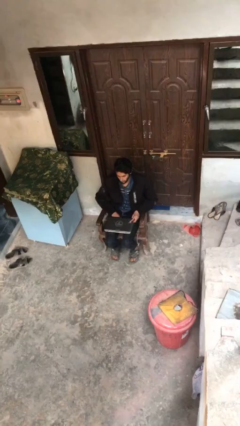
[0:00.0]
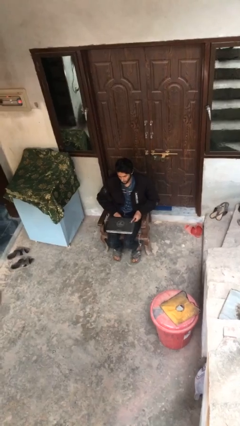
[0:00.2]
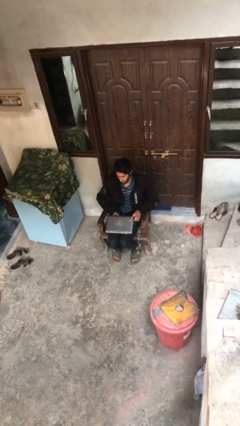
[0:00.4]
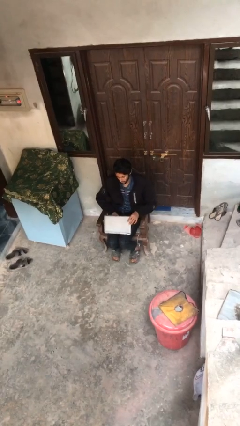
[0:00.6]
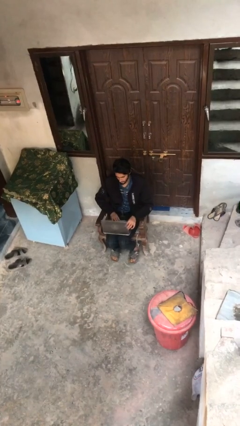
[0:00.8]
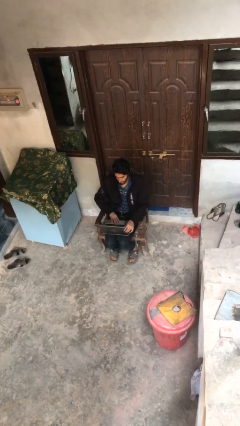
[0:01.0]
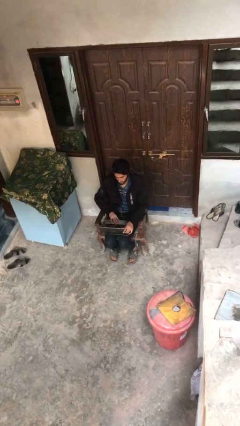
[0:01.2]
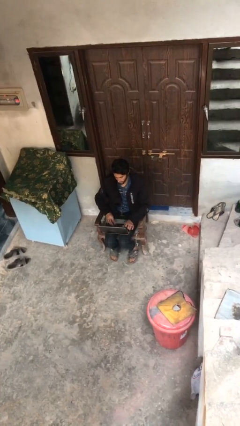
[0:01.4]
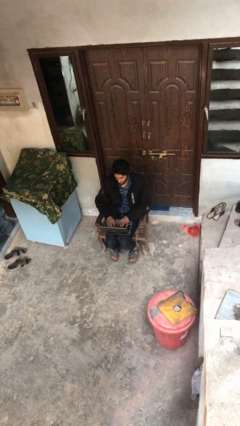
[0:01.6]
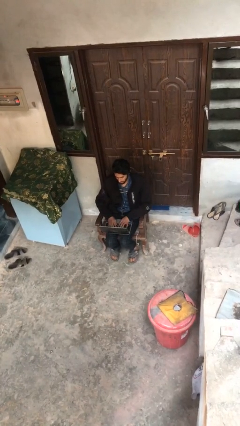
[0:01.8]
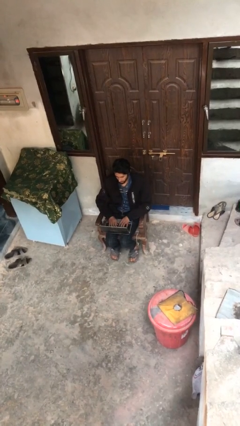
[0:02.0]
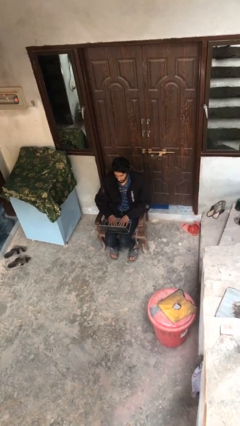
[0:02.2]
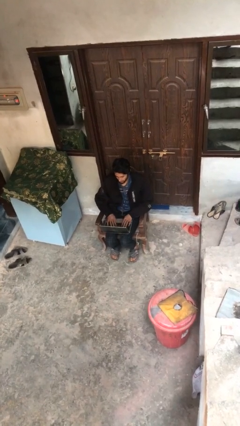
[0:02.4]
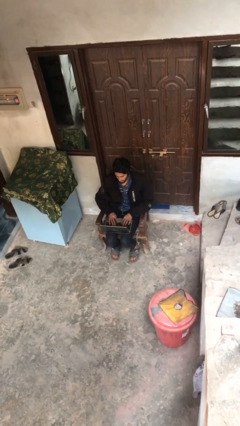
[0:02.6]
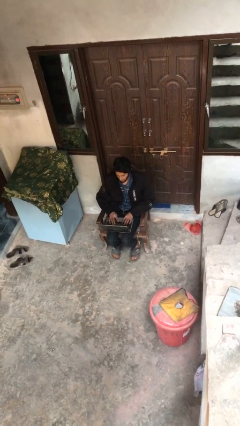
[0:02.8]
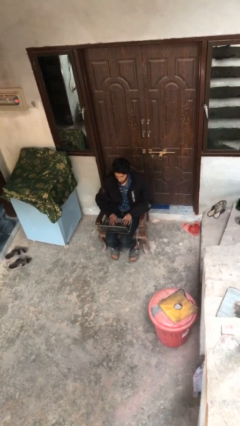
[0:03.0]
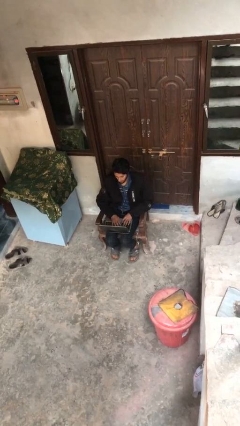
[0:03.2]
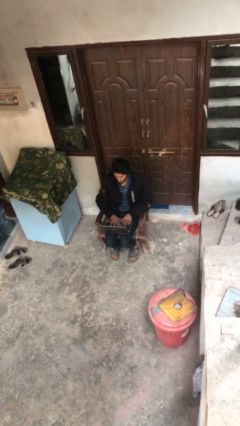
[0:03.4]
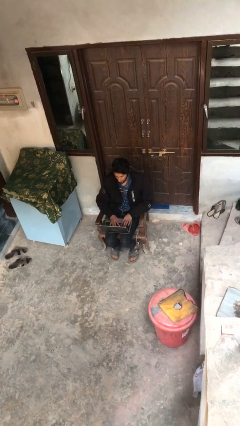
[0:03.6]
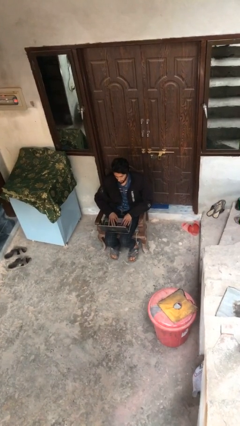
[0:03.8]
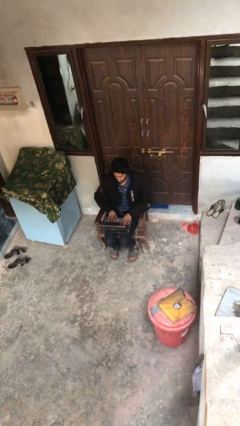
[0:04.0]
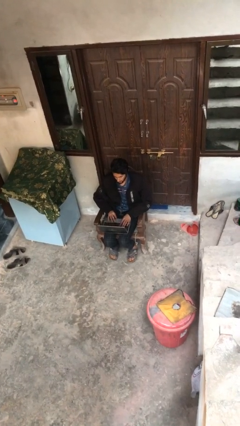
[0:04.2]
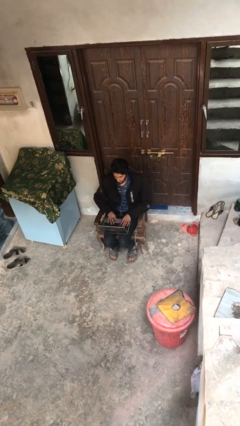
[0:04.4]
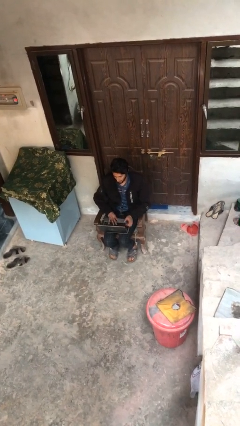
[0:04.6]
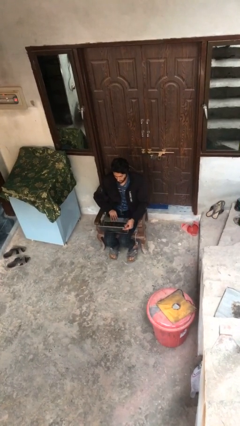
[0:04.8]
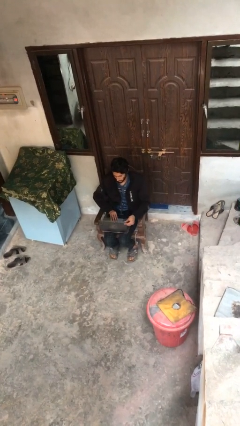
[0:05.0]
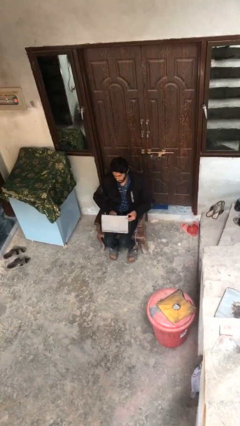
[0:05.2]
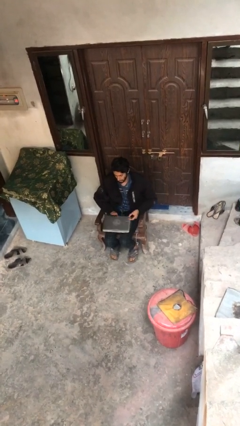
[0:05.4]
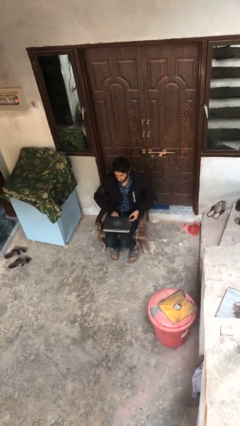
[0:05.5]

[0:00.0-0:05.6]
person interacts with laptop

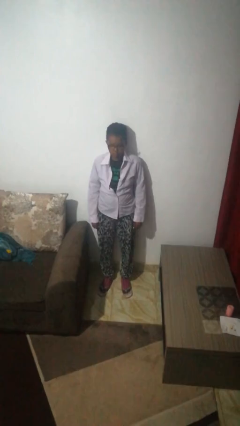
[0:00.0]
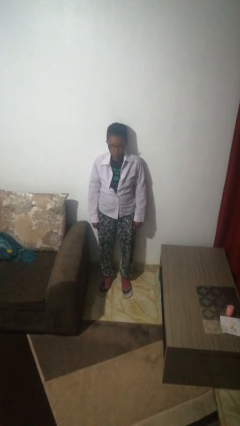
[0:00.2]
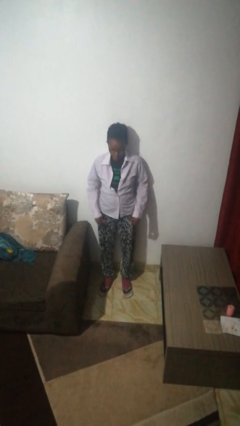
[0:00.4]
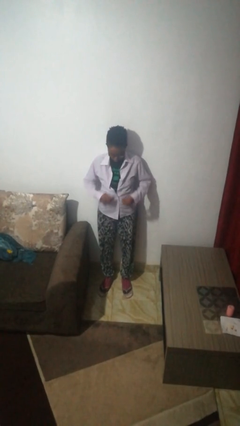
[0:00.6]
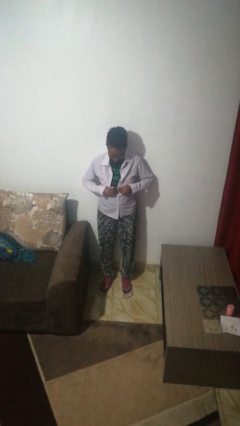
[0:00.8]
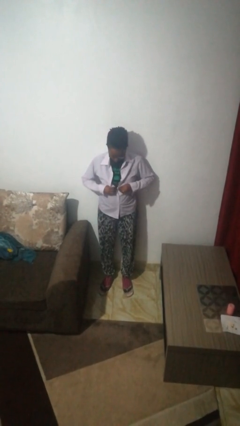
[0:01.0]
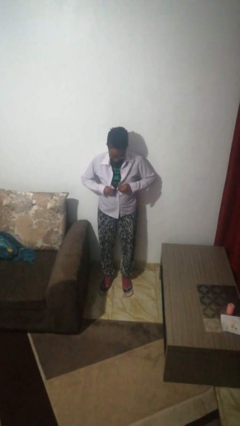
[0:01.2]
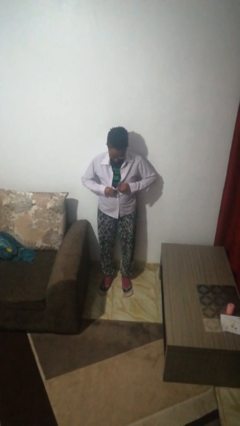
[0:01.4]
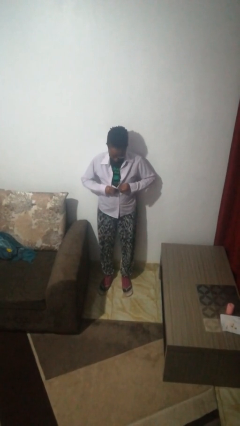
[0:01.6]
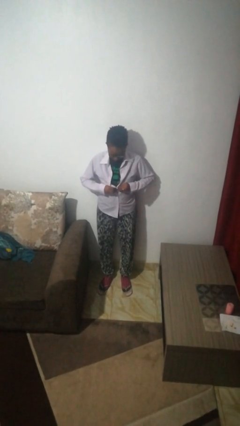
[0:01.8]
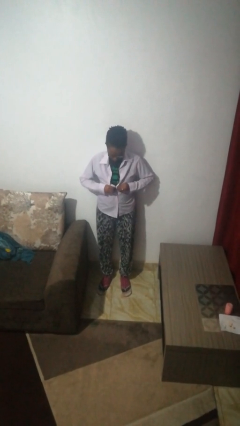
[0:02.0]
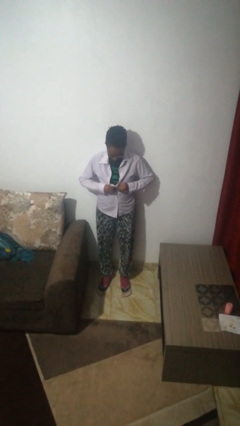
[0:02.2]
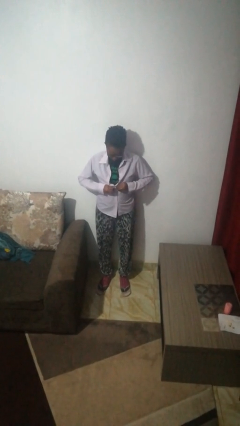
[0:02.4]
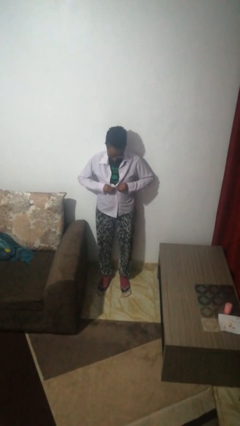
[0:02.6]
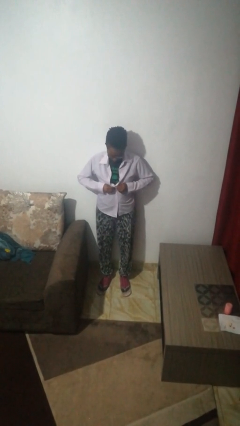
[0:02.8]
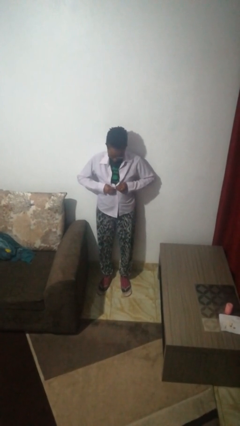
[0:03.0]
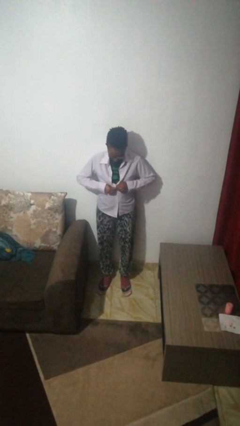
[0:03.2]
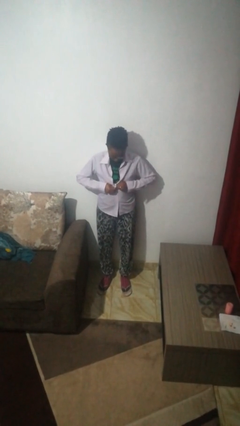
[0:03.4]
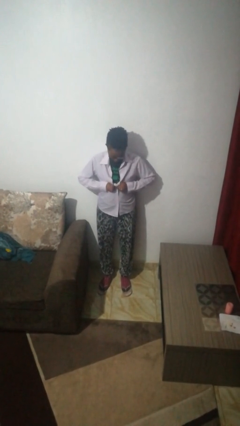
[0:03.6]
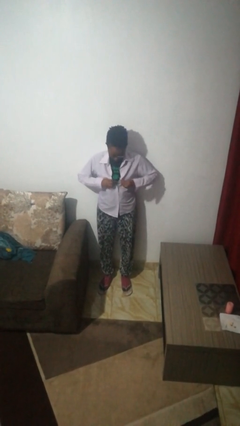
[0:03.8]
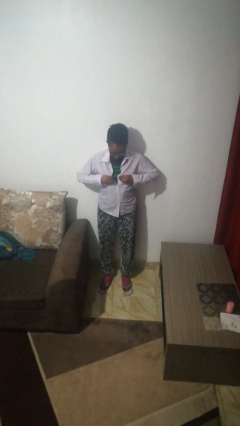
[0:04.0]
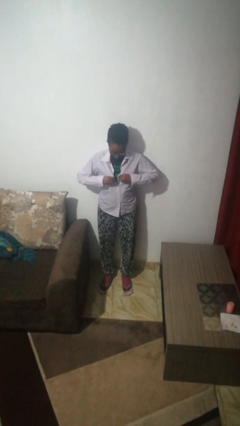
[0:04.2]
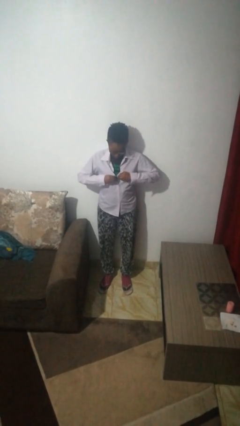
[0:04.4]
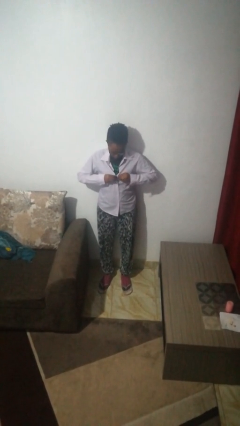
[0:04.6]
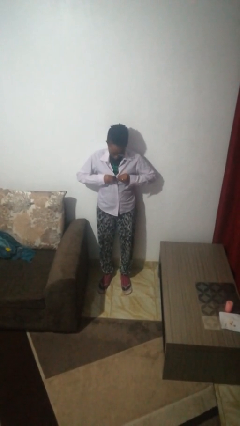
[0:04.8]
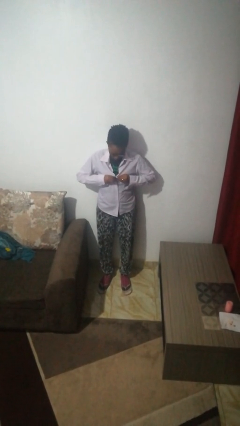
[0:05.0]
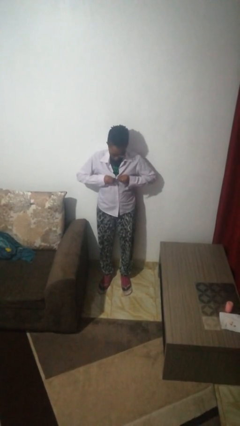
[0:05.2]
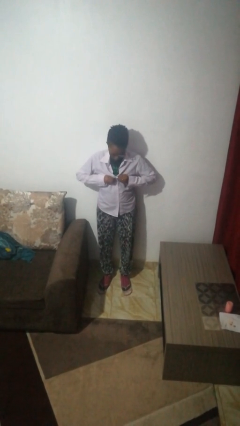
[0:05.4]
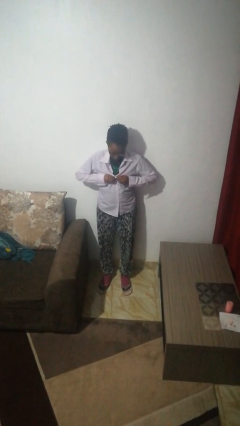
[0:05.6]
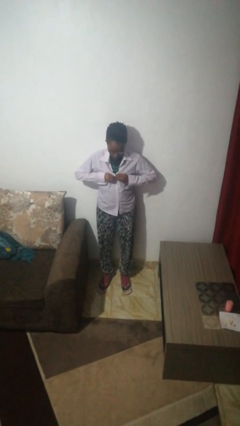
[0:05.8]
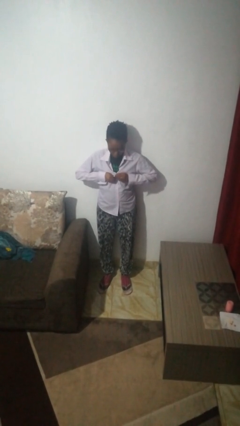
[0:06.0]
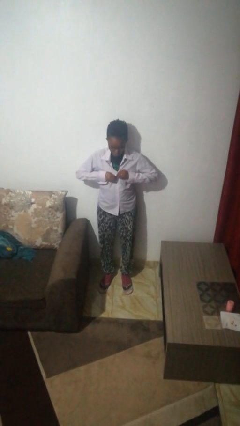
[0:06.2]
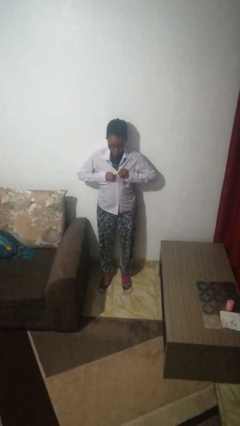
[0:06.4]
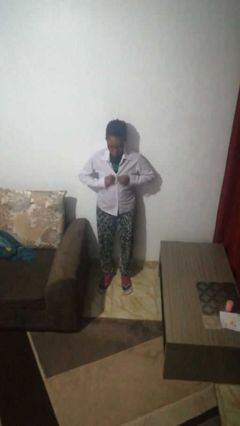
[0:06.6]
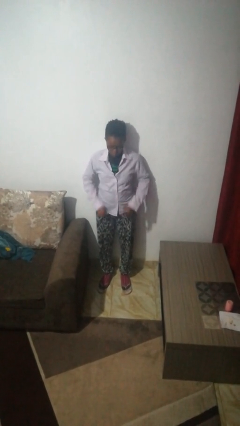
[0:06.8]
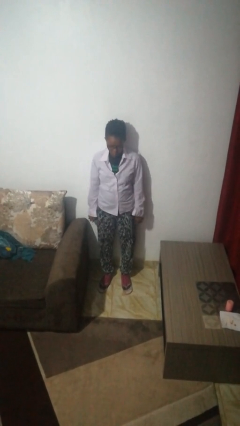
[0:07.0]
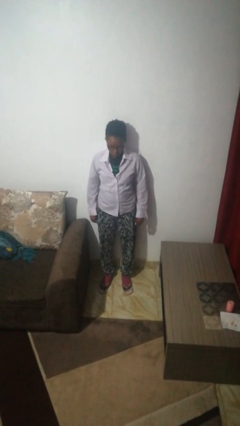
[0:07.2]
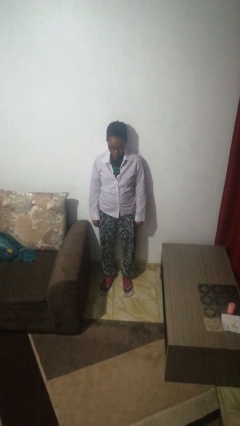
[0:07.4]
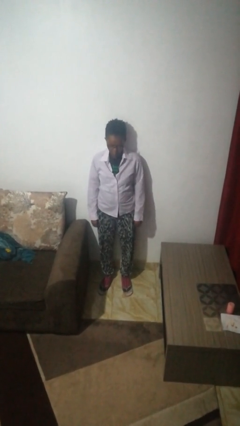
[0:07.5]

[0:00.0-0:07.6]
person buttons shirt

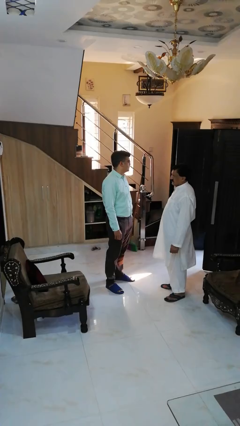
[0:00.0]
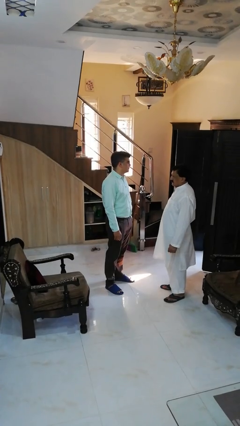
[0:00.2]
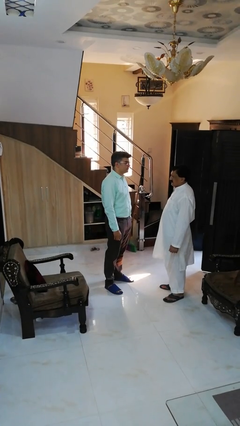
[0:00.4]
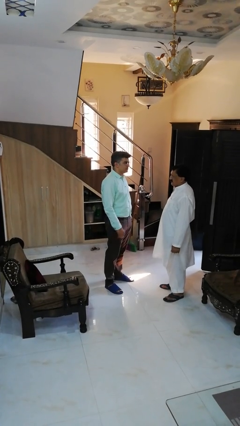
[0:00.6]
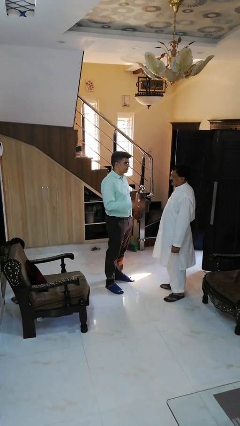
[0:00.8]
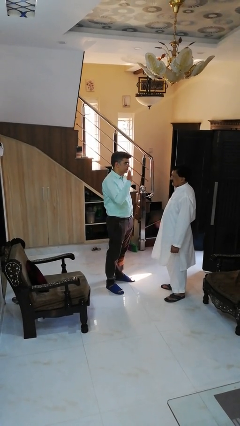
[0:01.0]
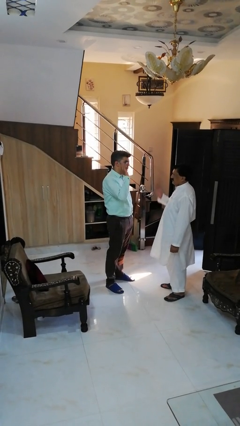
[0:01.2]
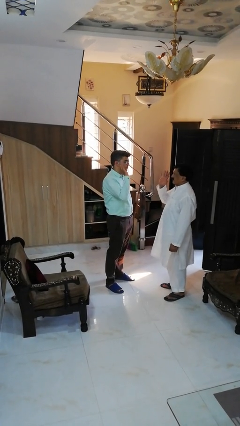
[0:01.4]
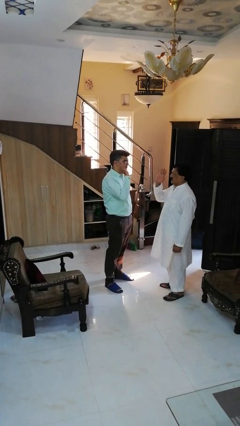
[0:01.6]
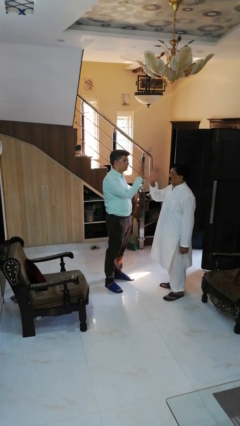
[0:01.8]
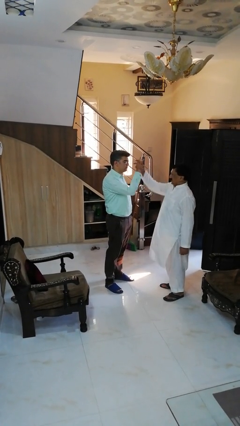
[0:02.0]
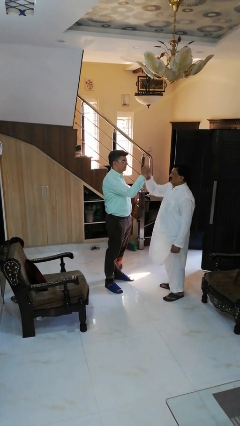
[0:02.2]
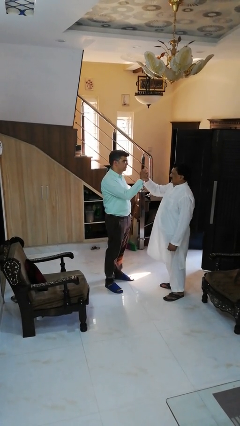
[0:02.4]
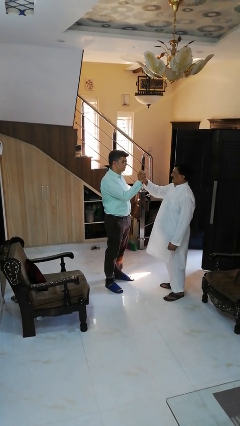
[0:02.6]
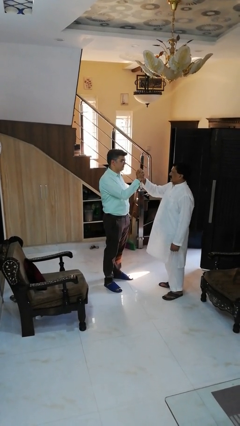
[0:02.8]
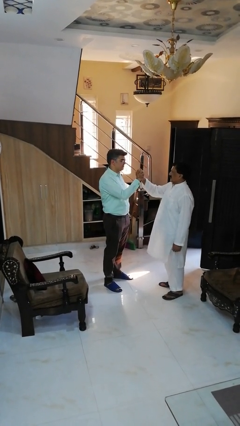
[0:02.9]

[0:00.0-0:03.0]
person highfives hand

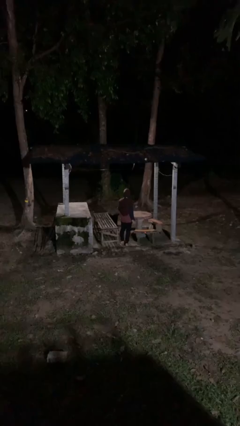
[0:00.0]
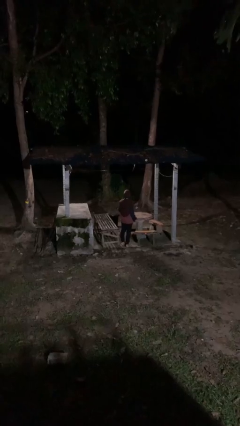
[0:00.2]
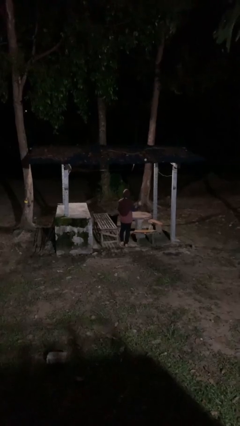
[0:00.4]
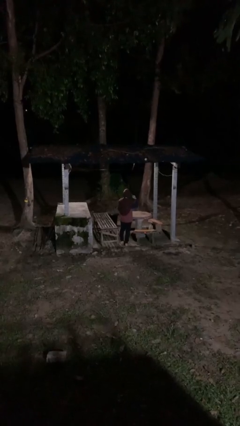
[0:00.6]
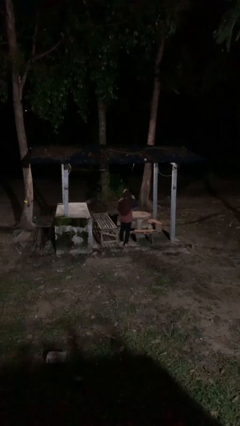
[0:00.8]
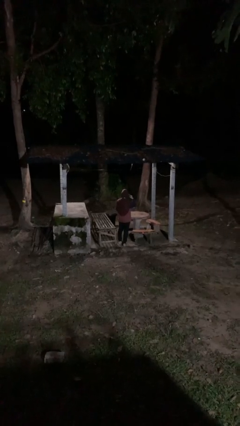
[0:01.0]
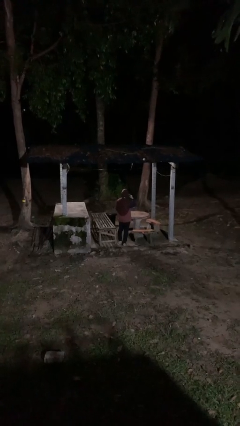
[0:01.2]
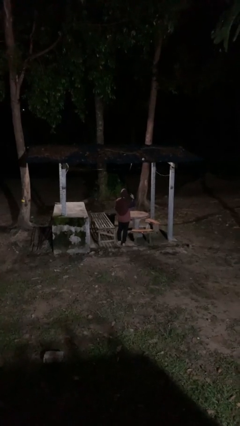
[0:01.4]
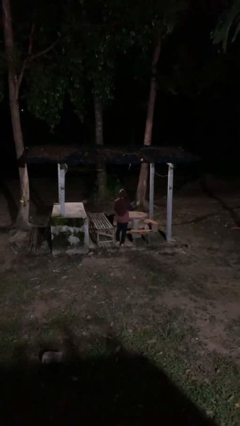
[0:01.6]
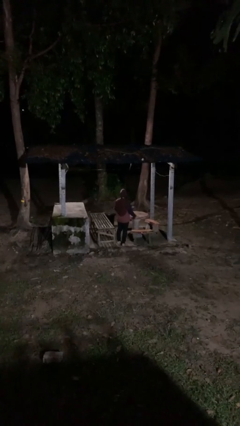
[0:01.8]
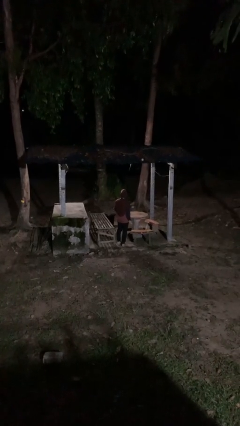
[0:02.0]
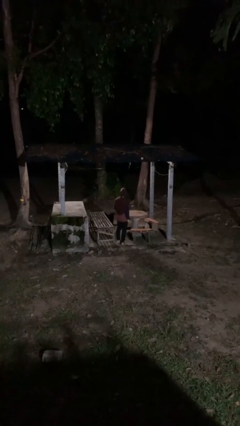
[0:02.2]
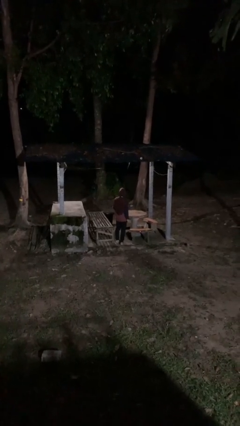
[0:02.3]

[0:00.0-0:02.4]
person gestures listen closely
